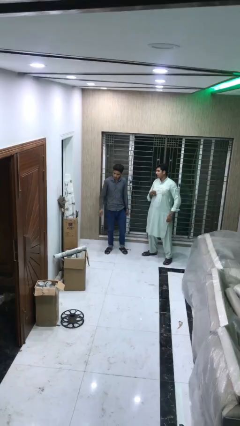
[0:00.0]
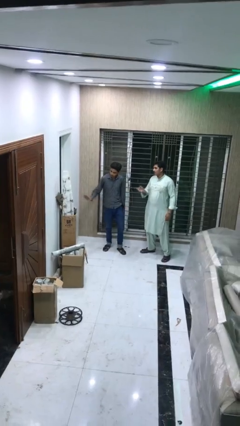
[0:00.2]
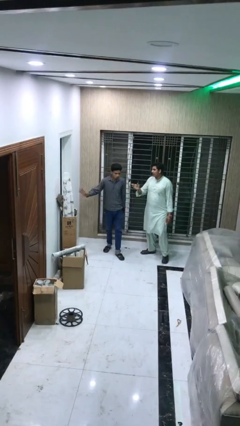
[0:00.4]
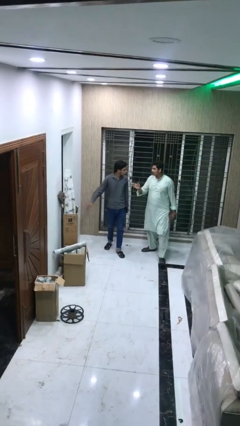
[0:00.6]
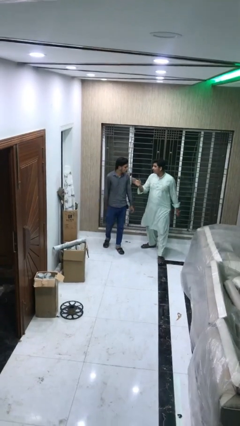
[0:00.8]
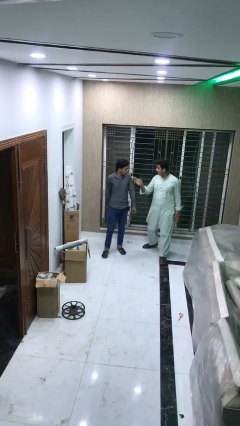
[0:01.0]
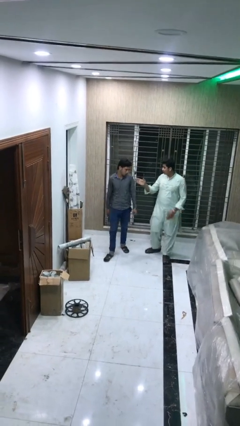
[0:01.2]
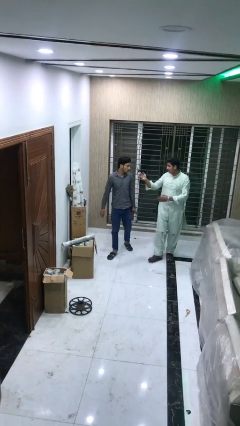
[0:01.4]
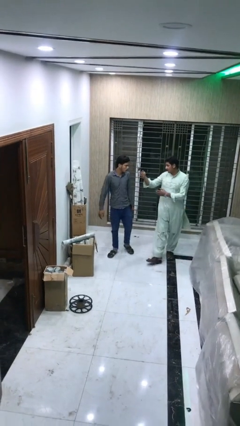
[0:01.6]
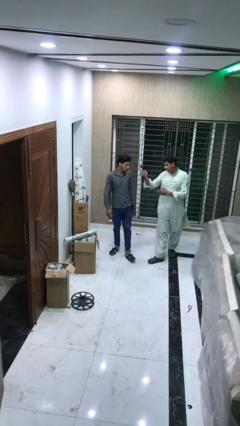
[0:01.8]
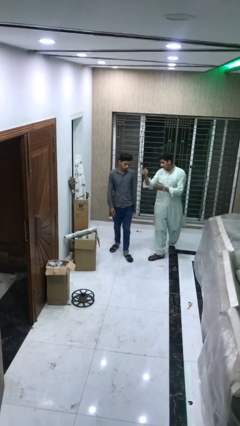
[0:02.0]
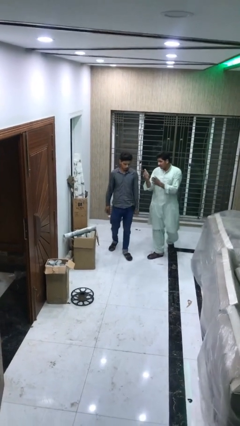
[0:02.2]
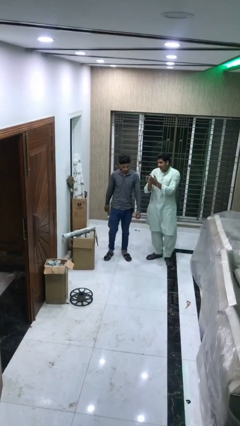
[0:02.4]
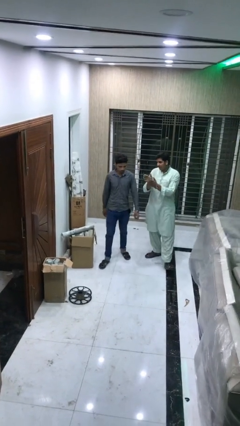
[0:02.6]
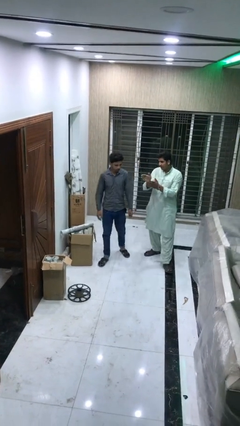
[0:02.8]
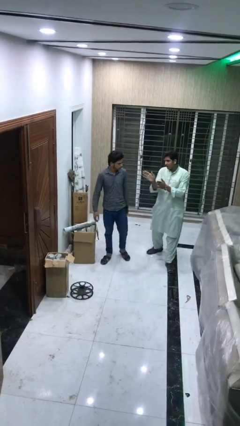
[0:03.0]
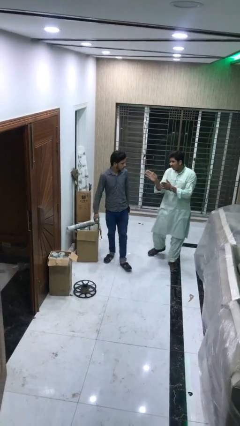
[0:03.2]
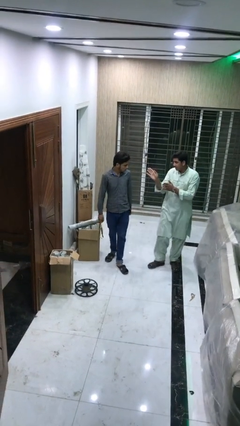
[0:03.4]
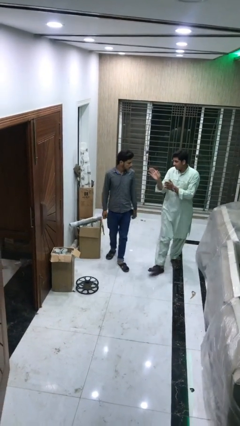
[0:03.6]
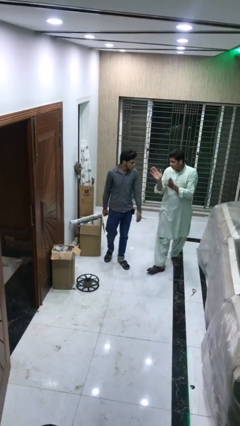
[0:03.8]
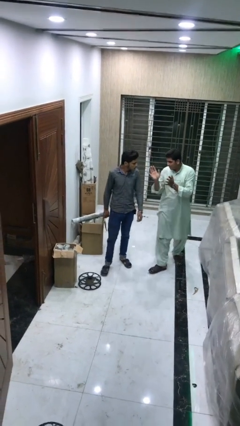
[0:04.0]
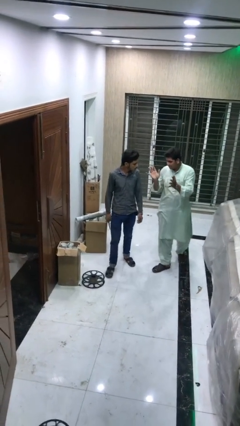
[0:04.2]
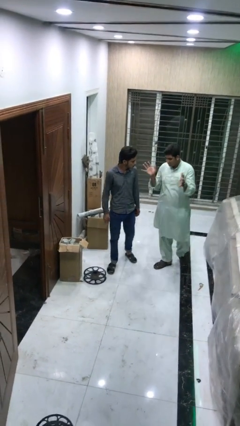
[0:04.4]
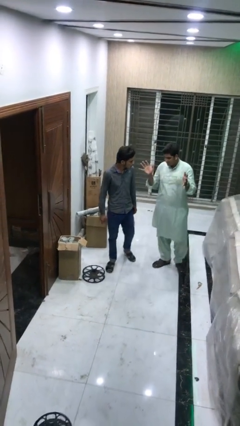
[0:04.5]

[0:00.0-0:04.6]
person talks to person

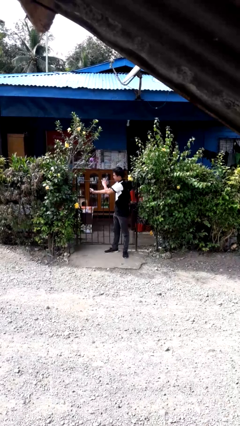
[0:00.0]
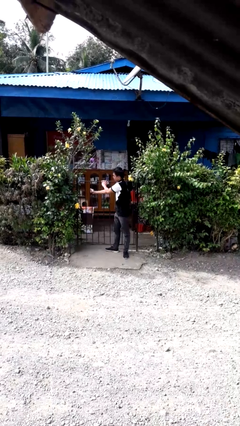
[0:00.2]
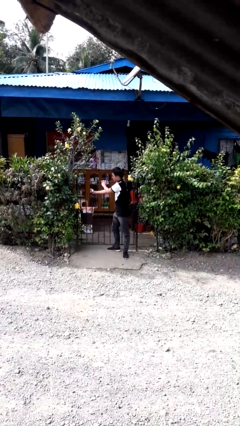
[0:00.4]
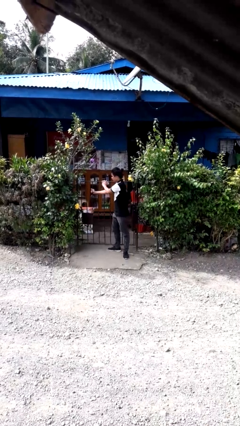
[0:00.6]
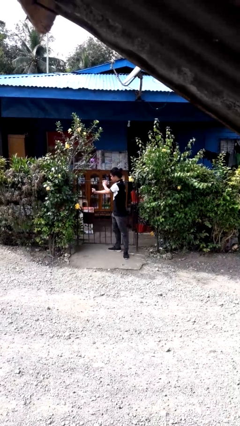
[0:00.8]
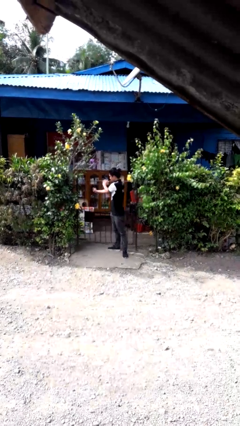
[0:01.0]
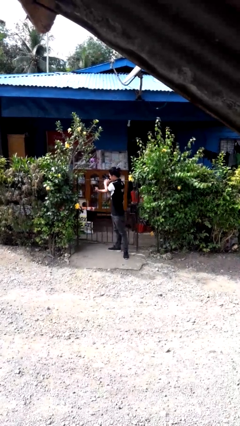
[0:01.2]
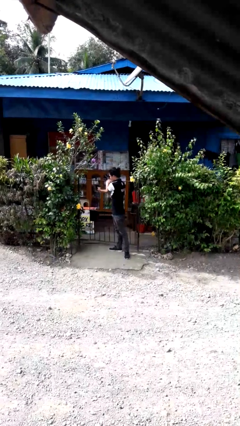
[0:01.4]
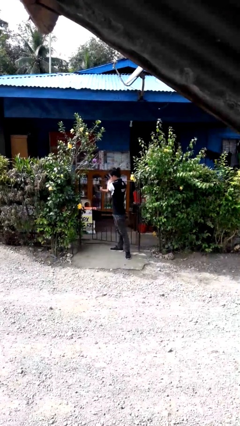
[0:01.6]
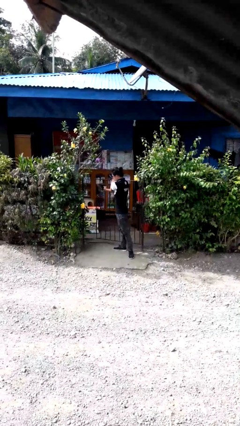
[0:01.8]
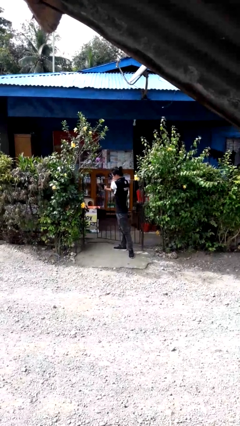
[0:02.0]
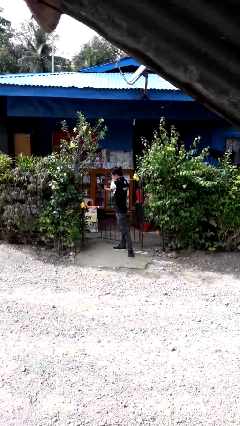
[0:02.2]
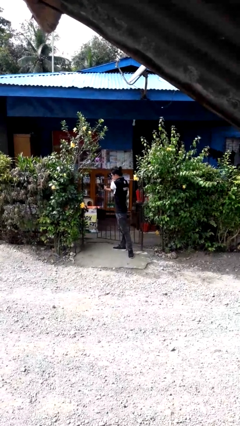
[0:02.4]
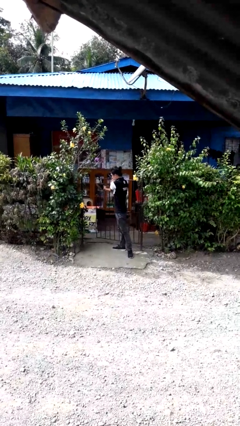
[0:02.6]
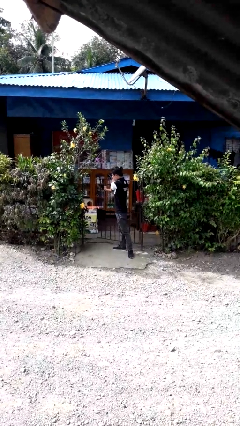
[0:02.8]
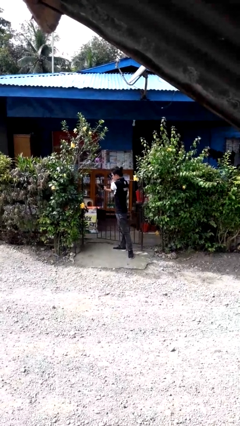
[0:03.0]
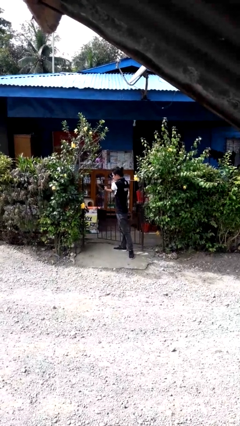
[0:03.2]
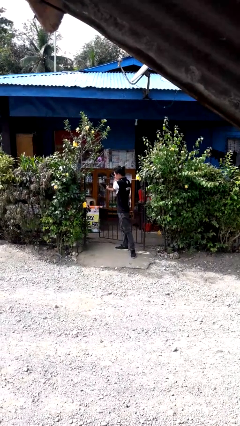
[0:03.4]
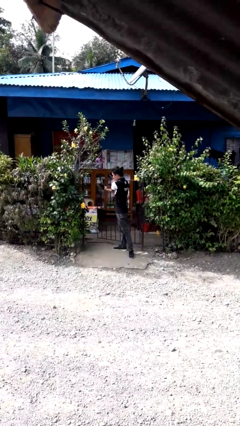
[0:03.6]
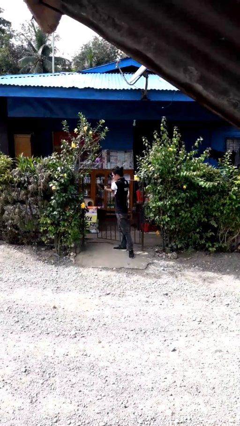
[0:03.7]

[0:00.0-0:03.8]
person opens gate

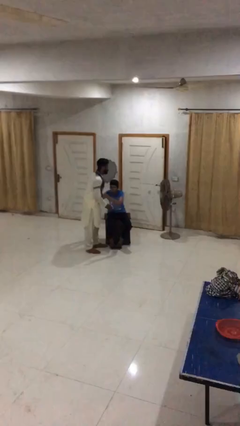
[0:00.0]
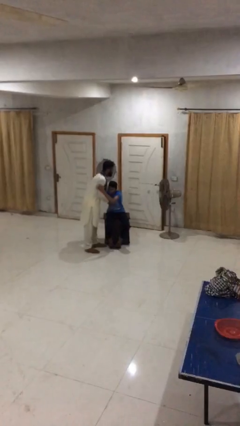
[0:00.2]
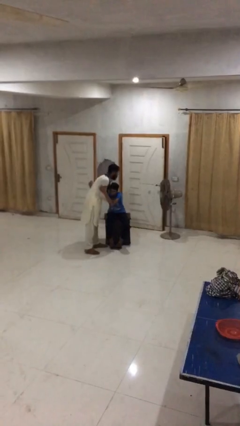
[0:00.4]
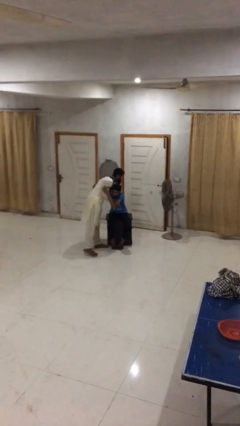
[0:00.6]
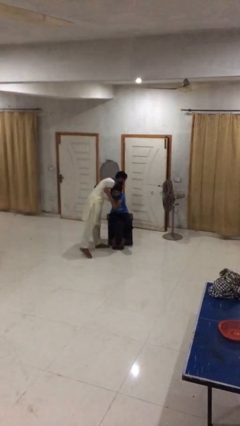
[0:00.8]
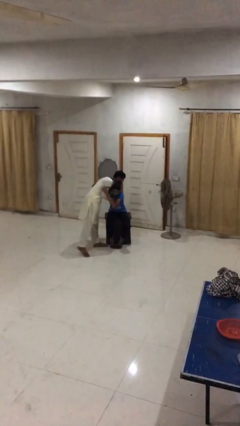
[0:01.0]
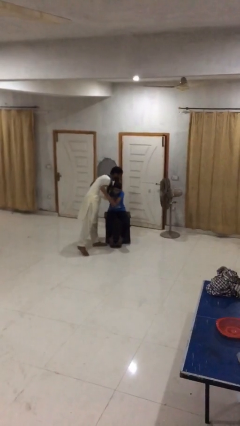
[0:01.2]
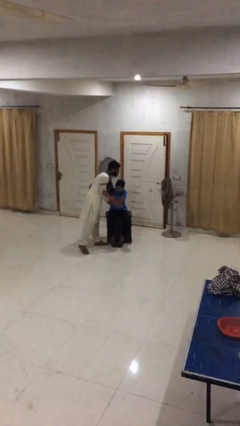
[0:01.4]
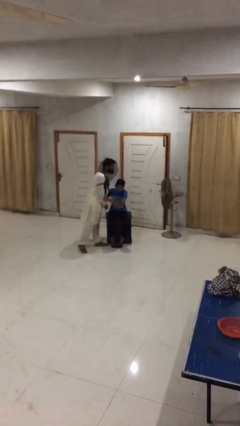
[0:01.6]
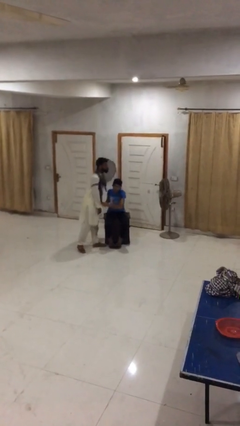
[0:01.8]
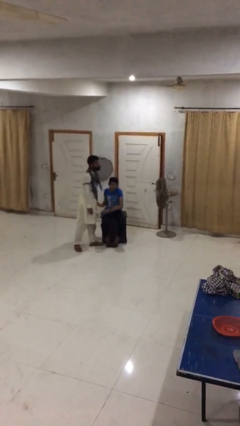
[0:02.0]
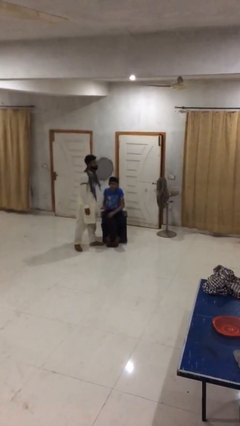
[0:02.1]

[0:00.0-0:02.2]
person embraces person

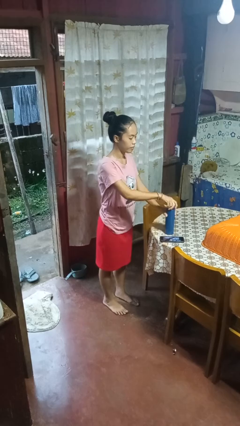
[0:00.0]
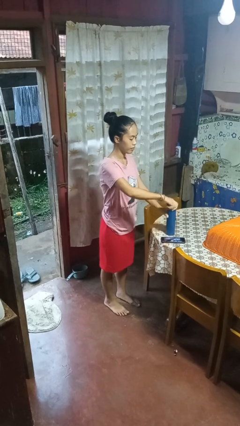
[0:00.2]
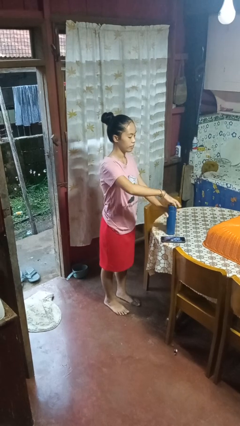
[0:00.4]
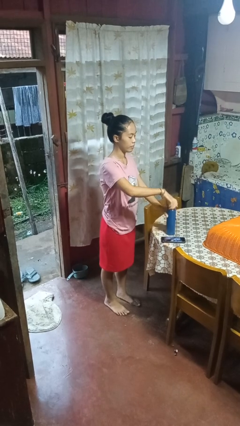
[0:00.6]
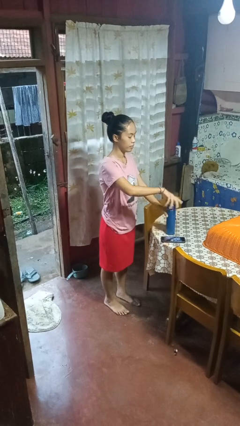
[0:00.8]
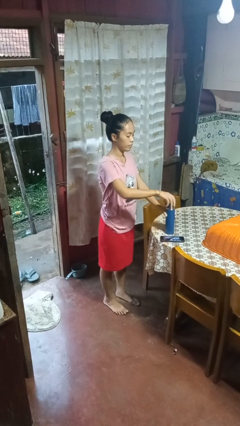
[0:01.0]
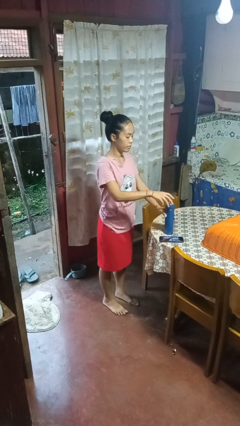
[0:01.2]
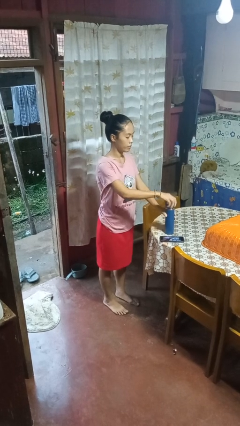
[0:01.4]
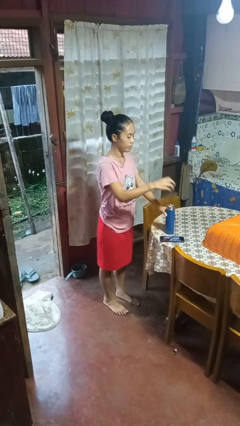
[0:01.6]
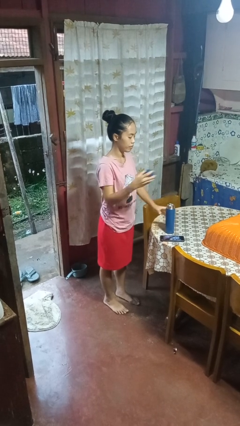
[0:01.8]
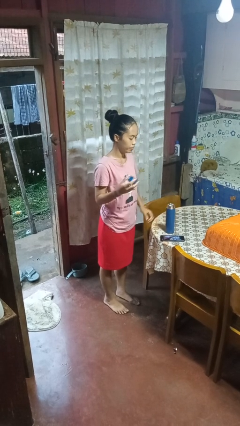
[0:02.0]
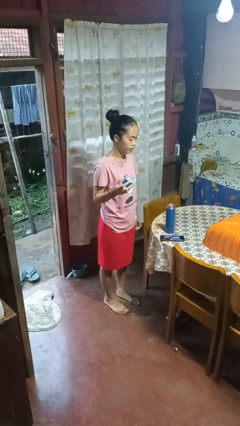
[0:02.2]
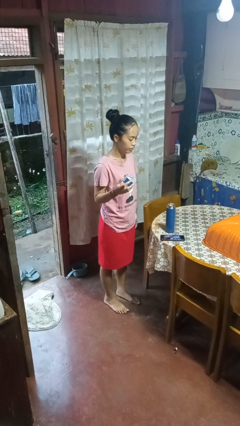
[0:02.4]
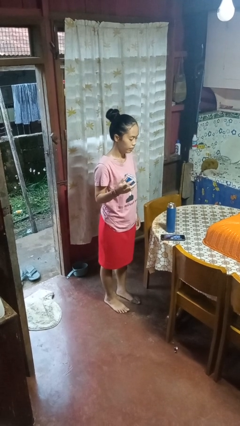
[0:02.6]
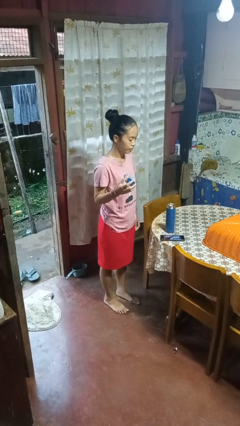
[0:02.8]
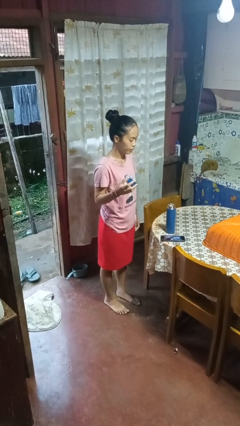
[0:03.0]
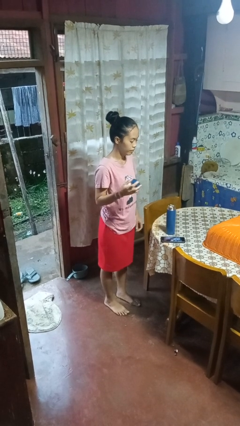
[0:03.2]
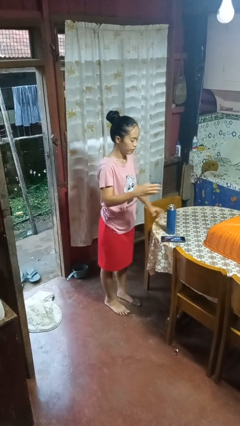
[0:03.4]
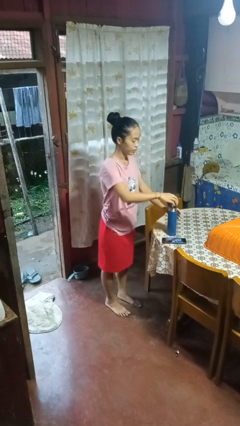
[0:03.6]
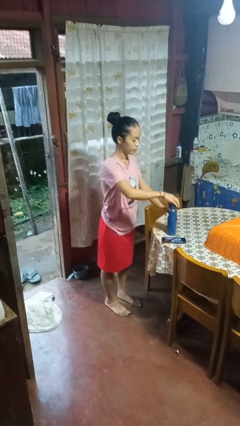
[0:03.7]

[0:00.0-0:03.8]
person opens jar

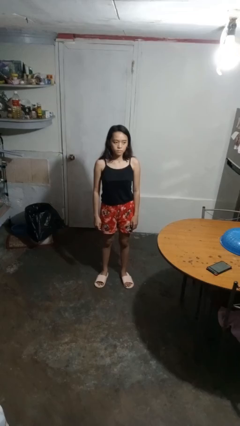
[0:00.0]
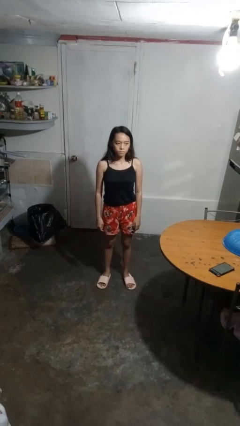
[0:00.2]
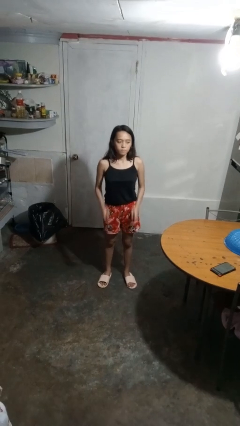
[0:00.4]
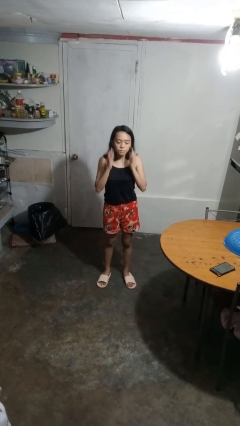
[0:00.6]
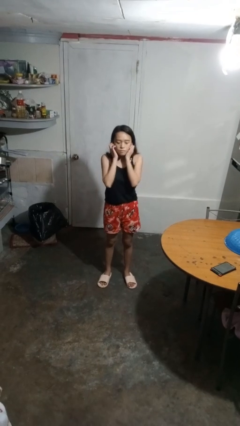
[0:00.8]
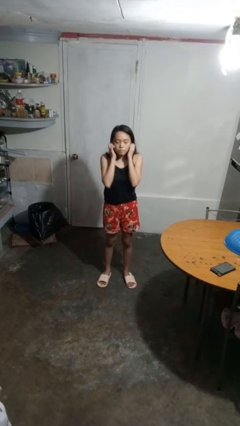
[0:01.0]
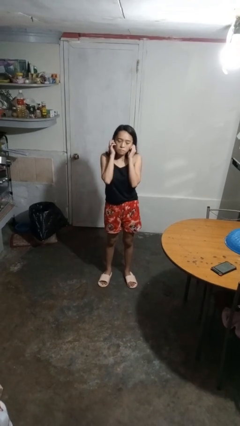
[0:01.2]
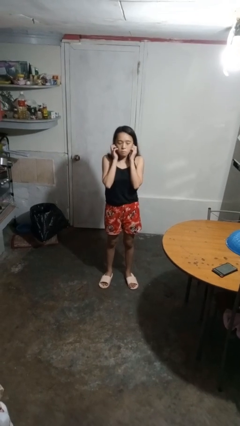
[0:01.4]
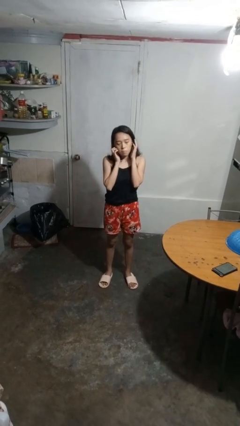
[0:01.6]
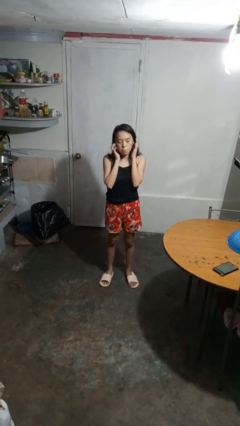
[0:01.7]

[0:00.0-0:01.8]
person puts fingers in ear

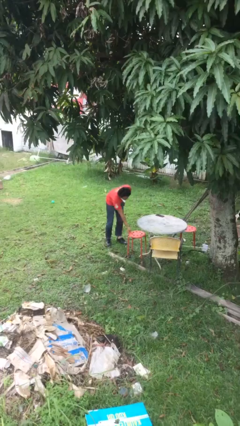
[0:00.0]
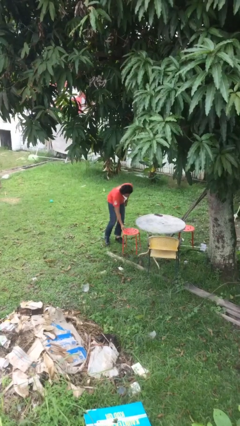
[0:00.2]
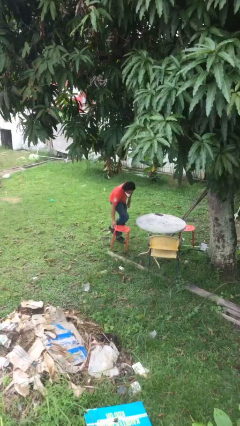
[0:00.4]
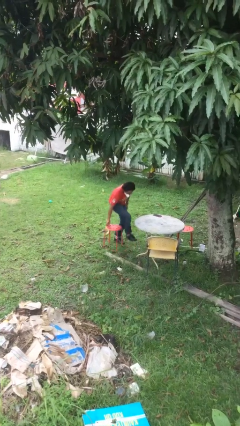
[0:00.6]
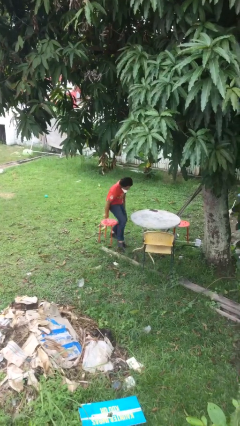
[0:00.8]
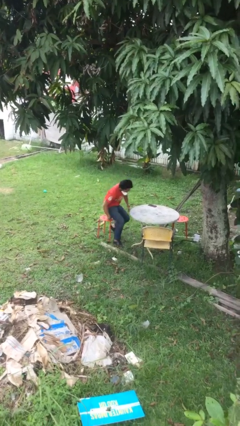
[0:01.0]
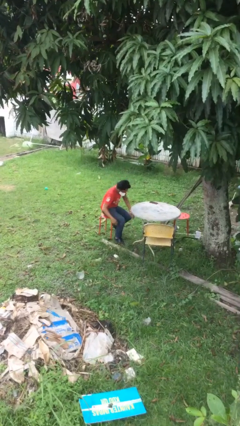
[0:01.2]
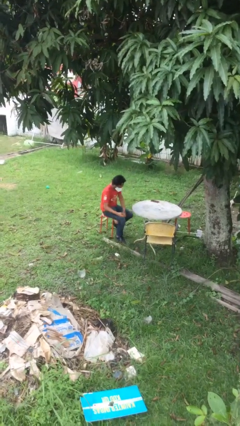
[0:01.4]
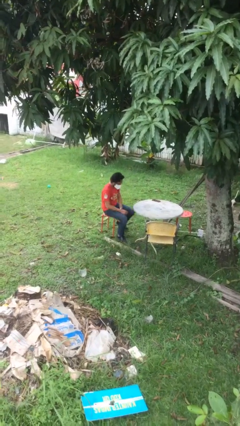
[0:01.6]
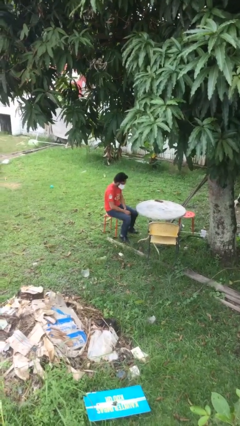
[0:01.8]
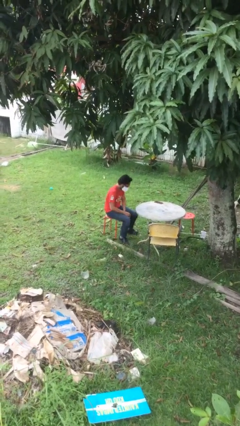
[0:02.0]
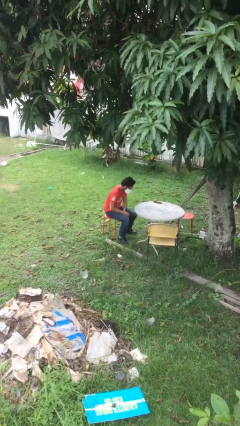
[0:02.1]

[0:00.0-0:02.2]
person sits down
